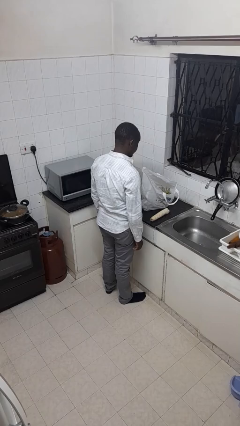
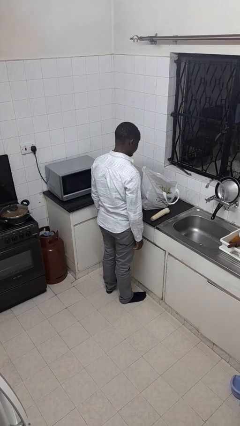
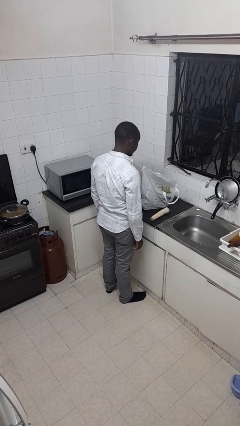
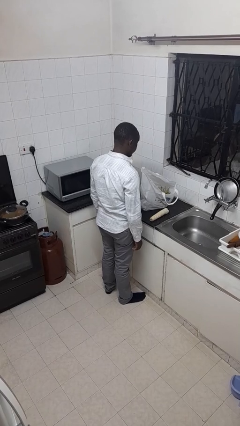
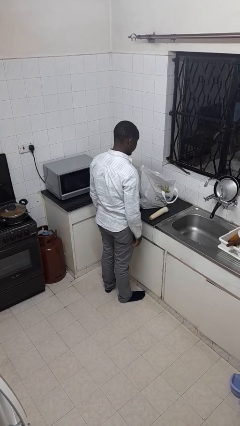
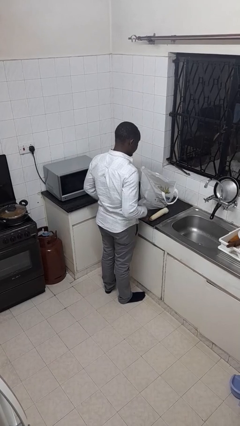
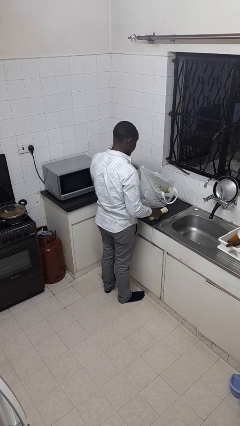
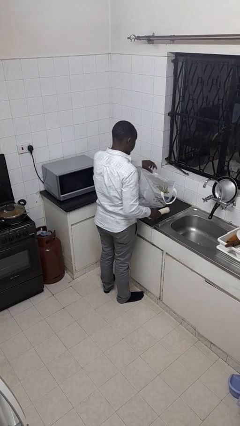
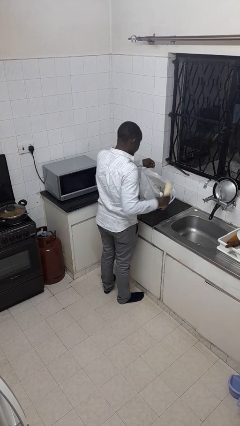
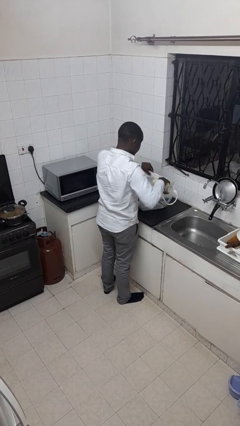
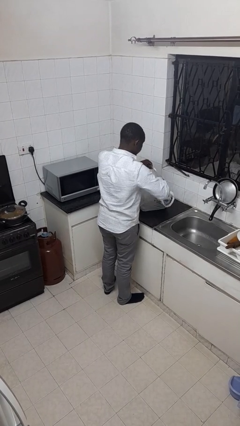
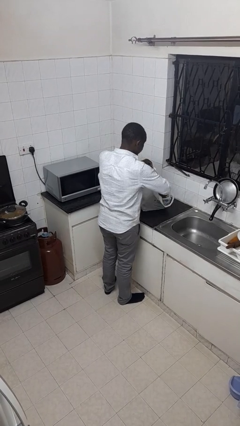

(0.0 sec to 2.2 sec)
person puts object into bag

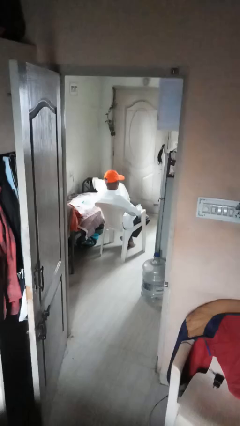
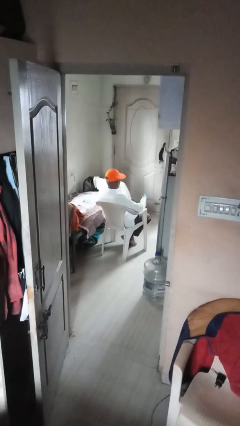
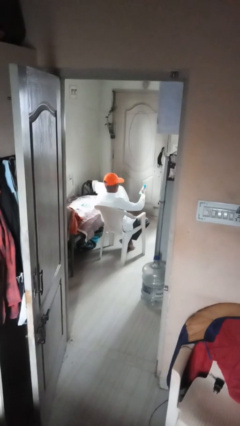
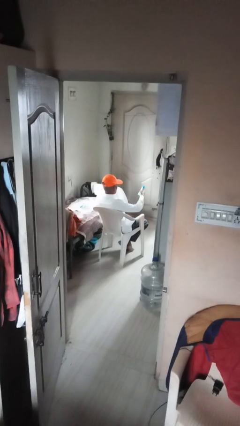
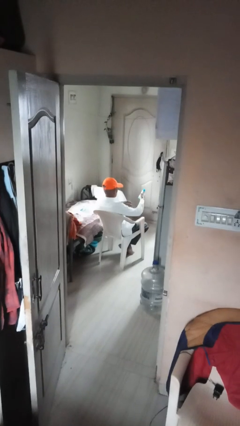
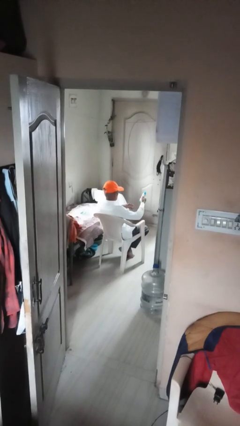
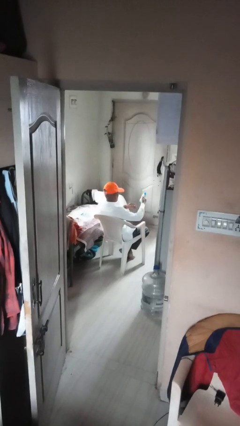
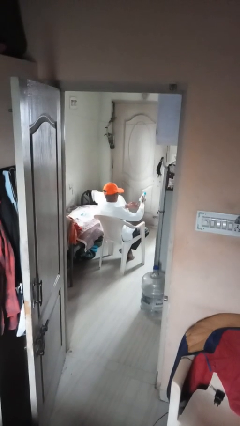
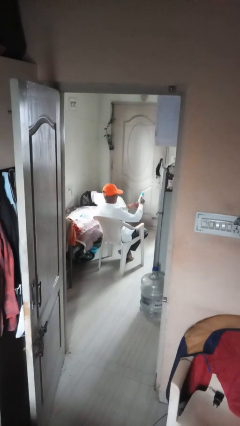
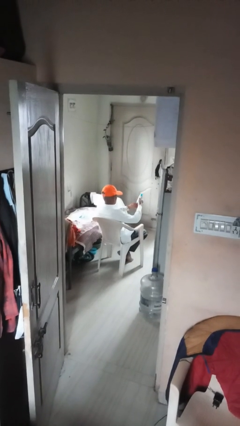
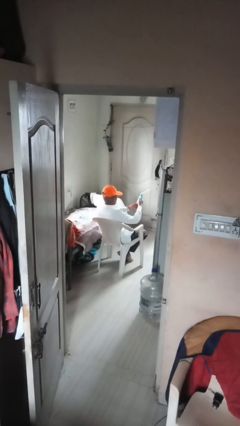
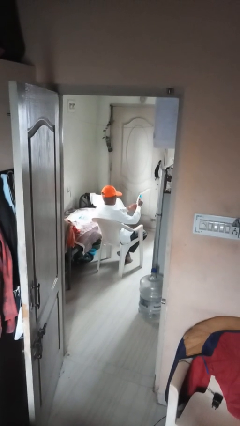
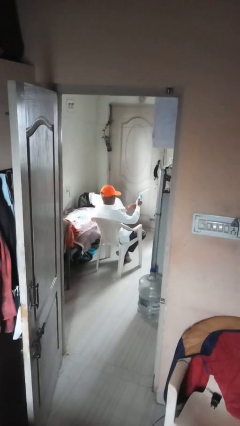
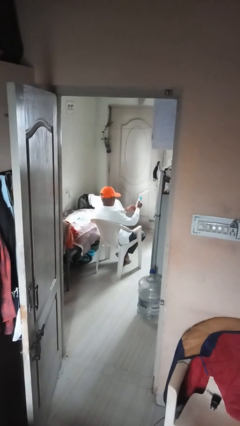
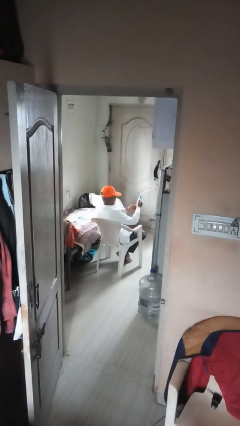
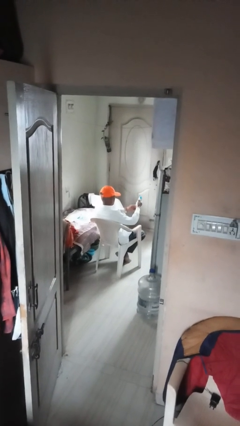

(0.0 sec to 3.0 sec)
person squeezes object

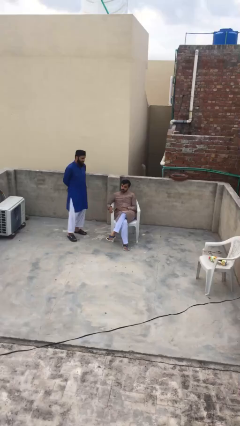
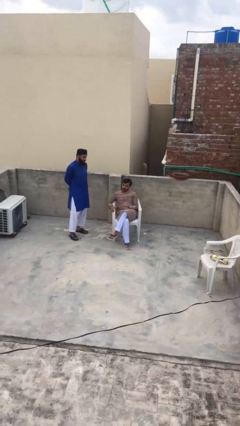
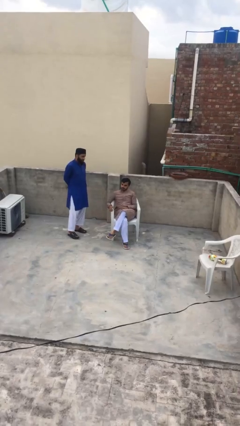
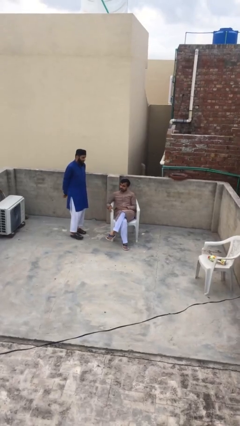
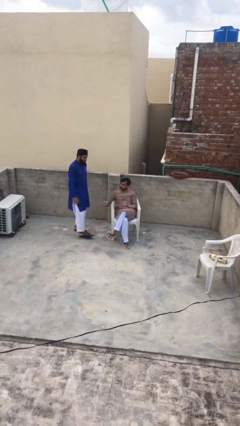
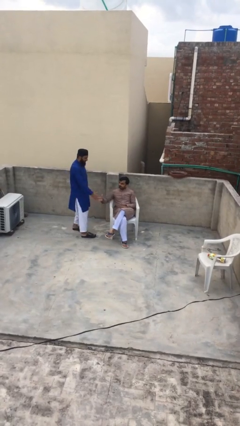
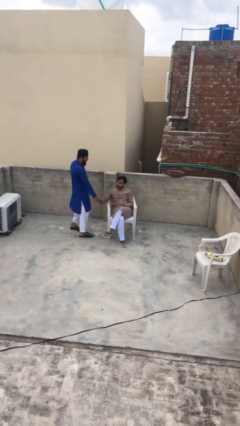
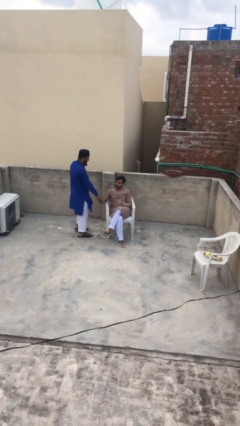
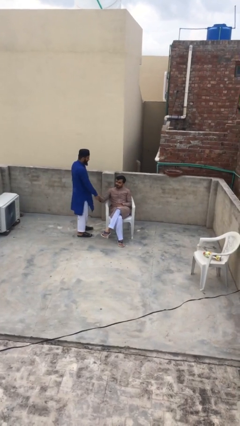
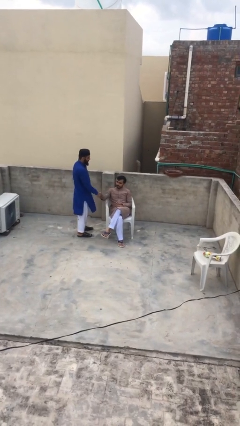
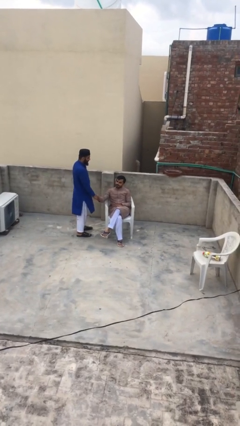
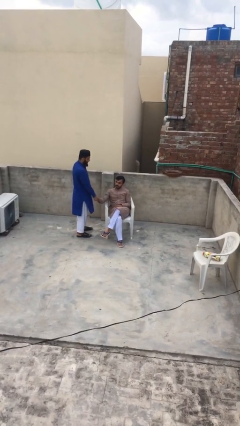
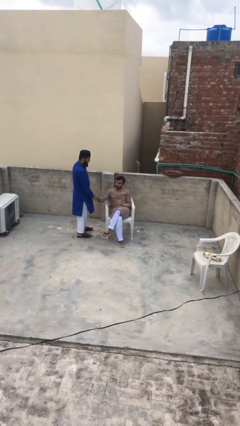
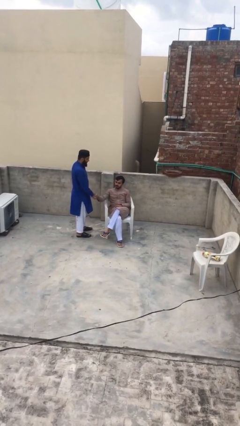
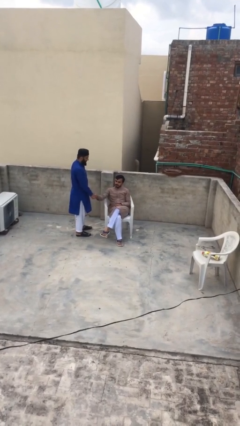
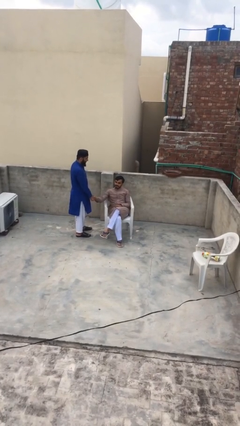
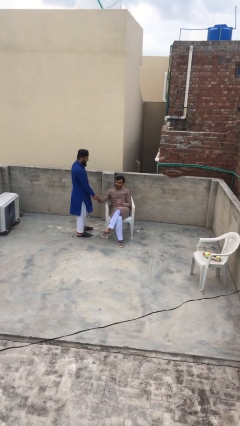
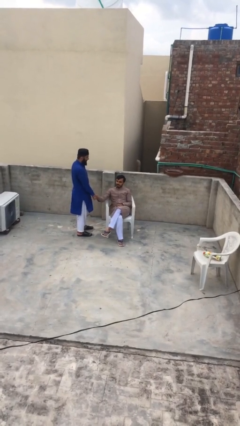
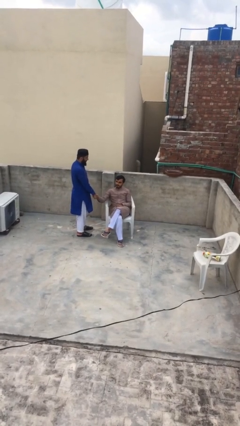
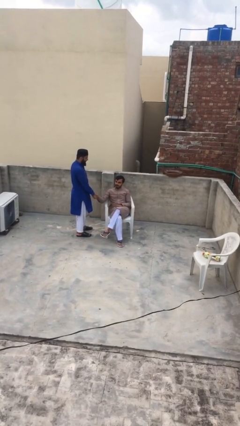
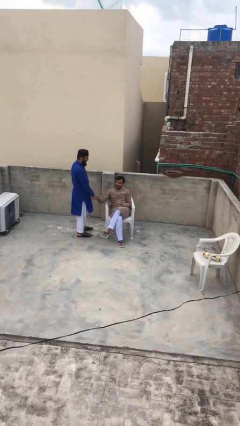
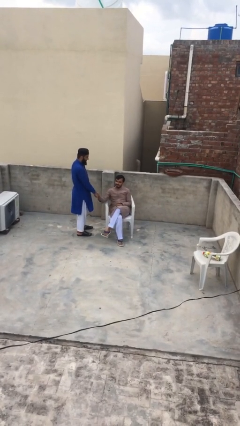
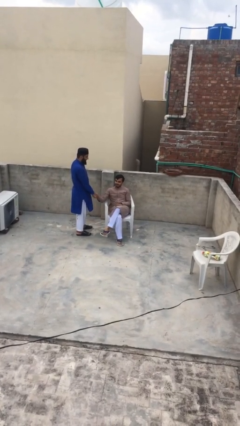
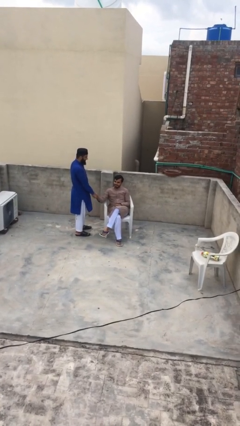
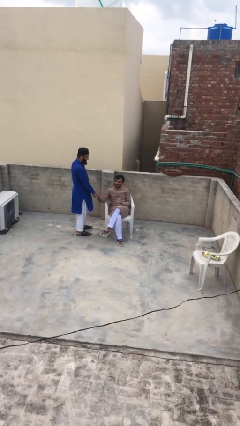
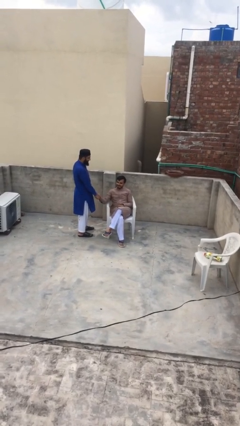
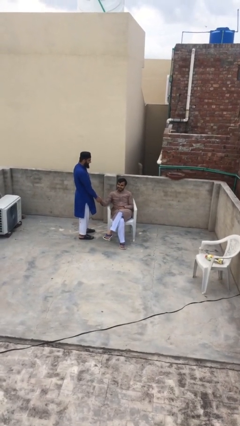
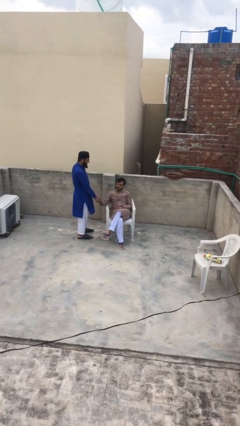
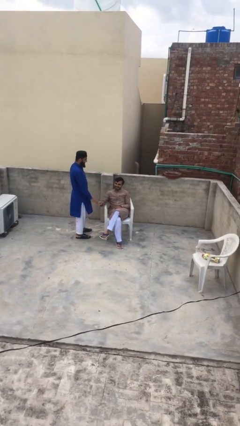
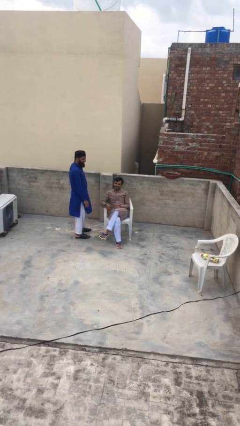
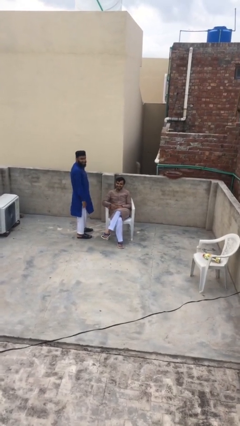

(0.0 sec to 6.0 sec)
person shakes hand

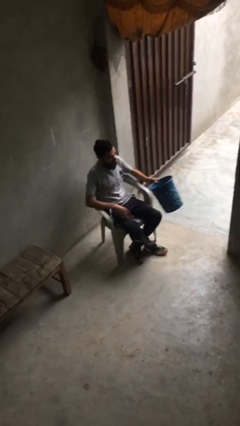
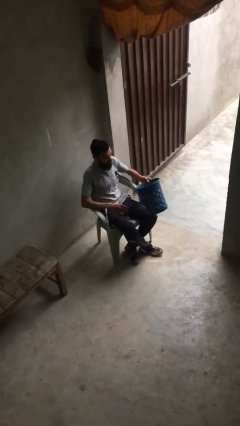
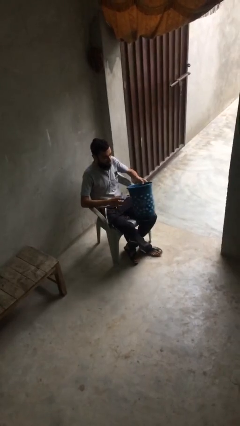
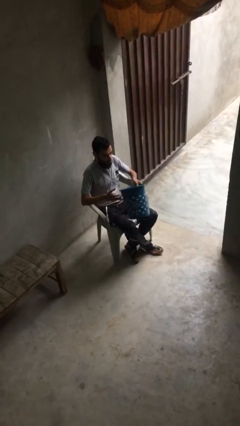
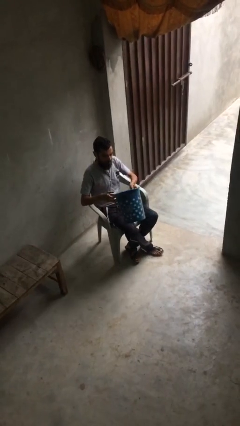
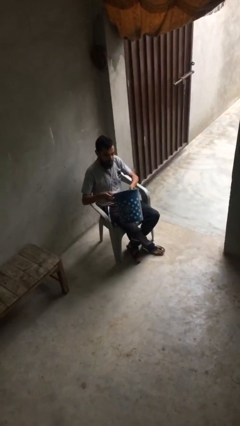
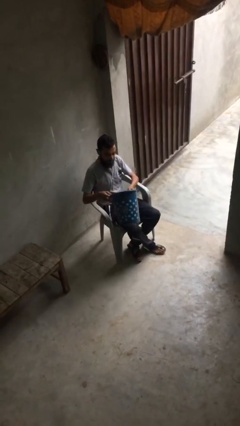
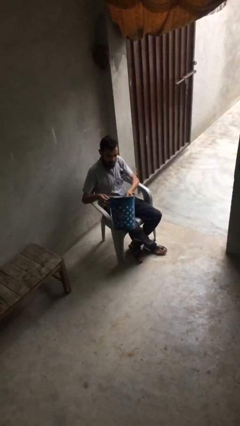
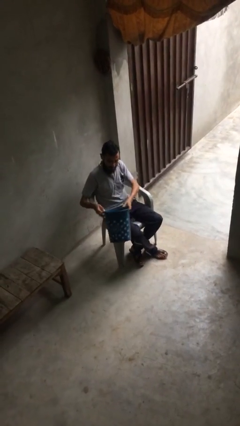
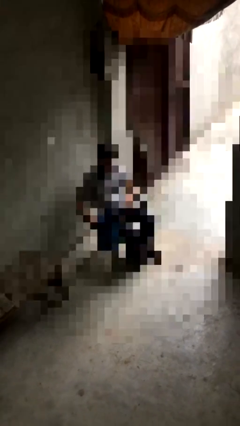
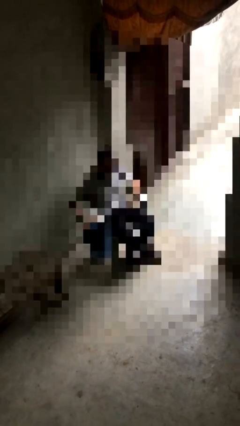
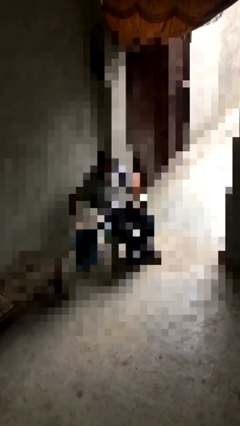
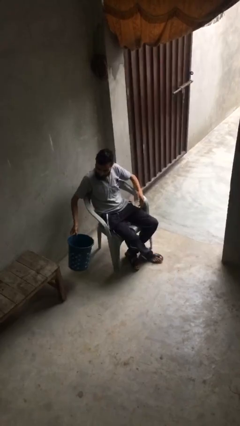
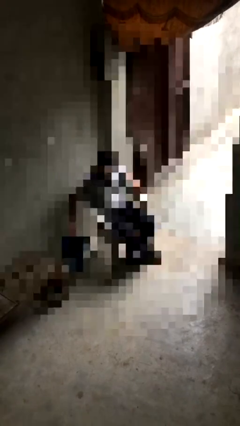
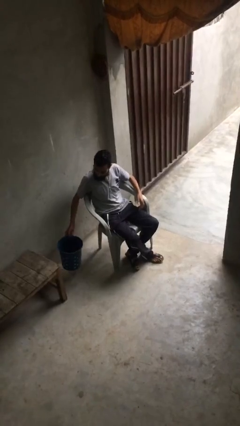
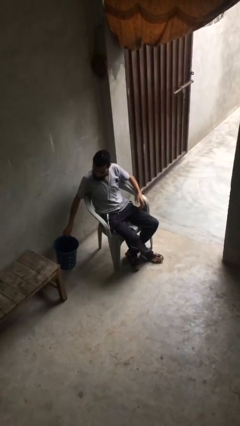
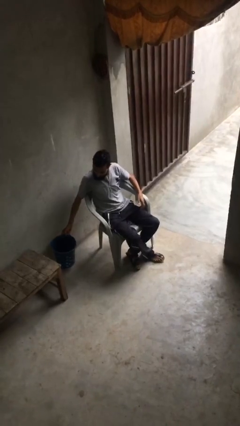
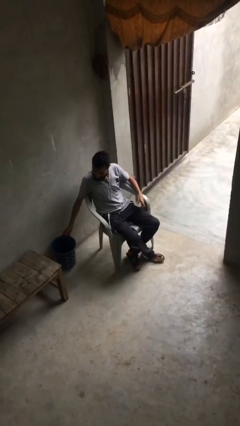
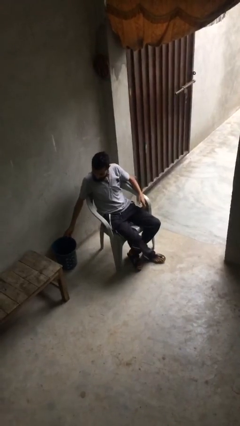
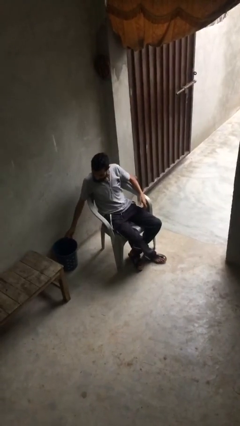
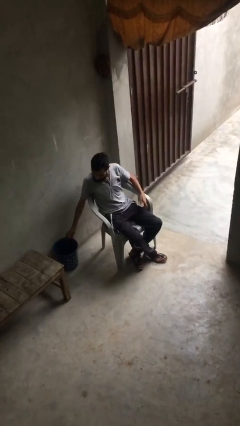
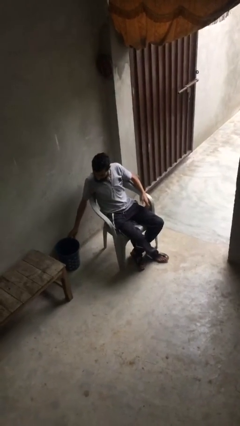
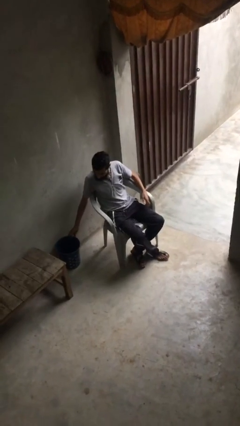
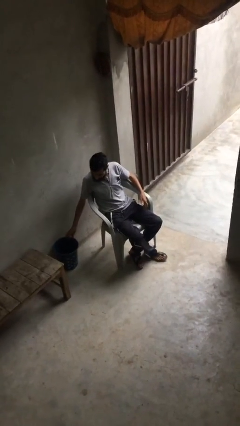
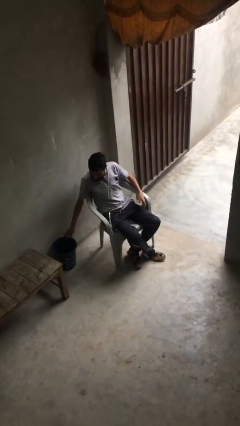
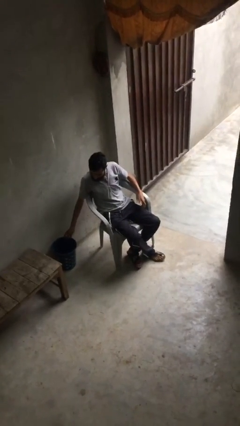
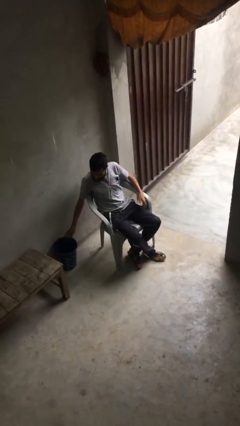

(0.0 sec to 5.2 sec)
person puts down object on floor

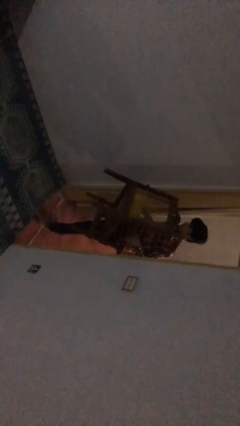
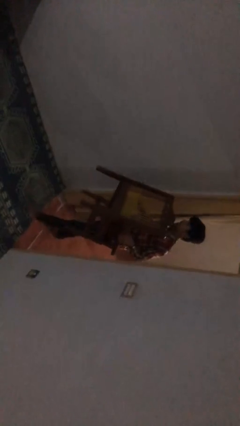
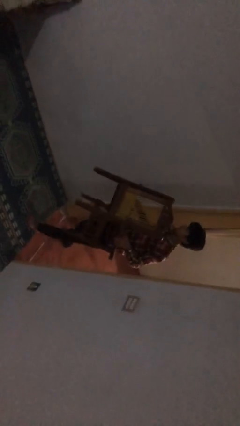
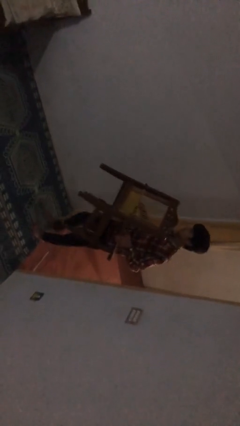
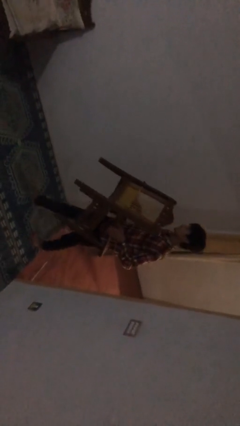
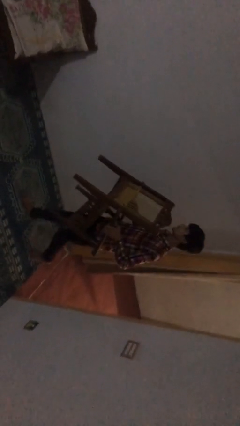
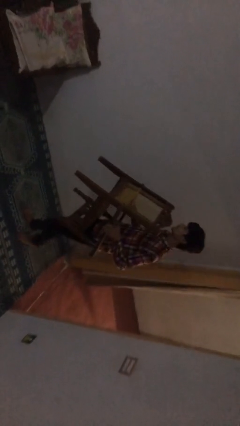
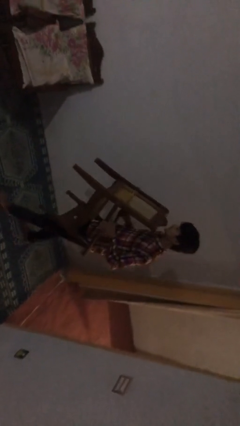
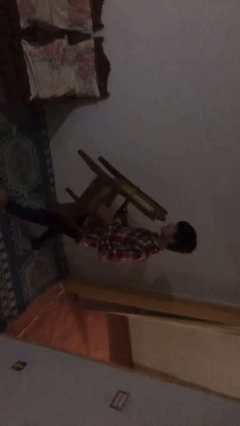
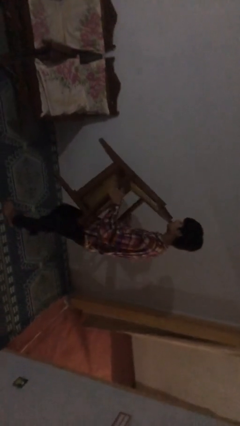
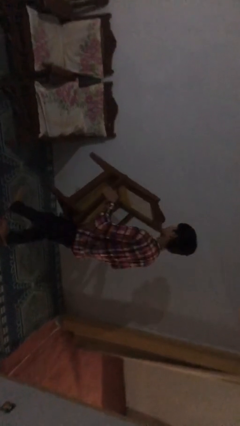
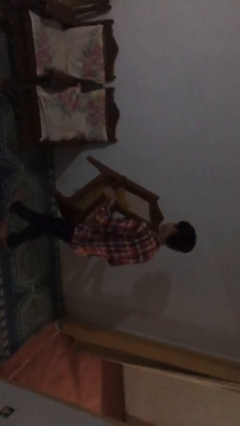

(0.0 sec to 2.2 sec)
person carries heavy object
